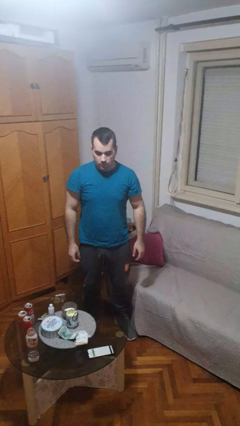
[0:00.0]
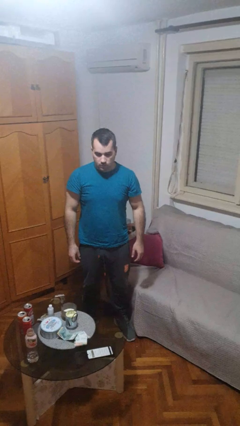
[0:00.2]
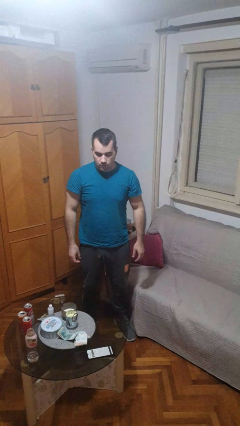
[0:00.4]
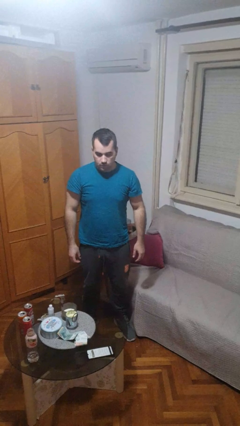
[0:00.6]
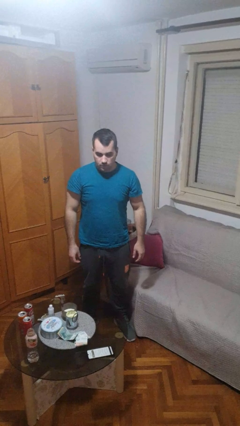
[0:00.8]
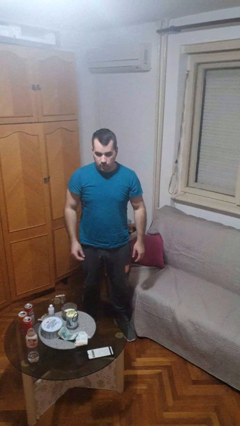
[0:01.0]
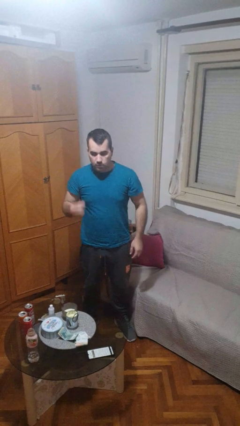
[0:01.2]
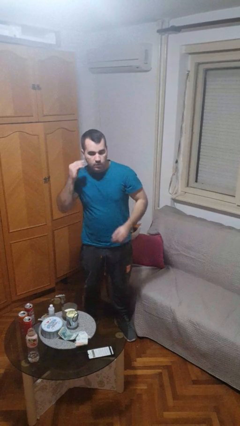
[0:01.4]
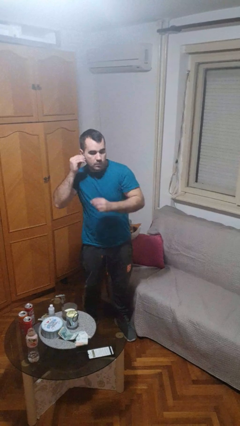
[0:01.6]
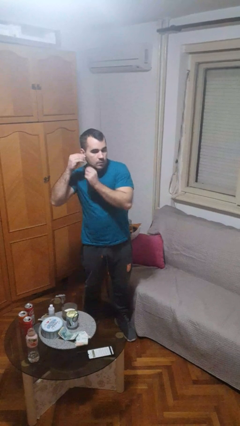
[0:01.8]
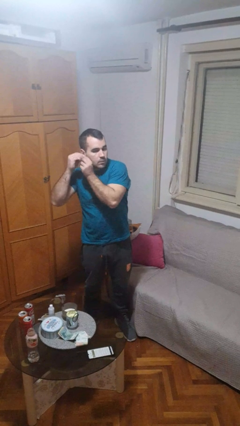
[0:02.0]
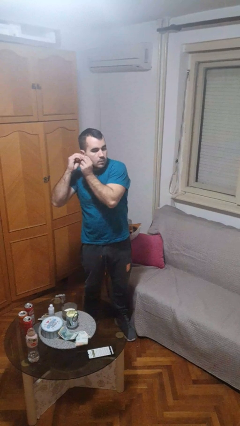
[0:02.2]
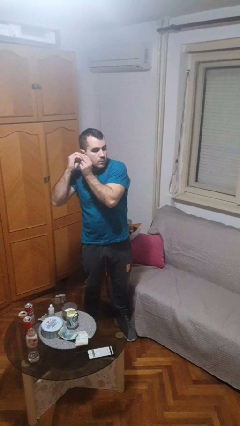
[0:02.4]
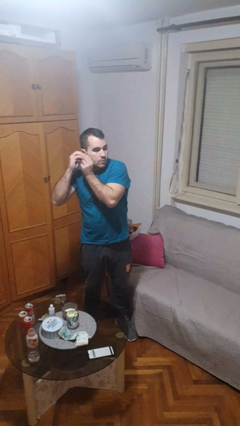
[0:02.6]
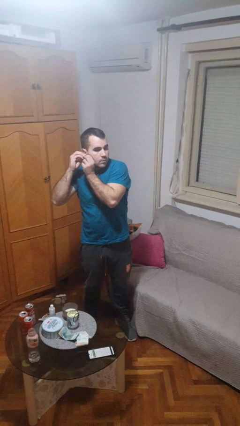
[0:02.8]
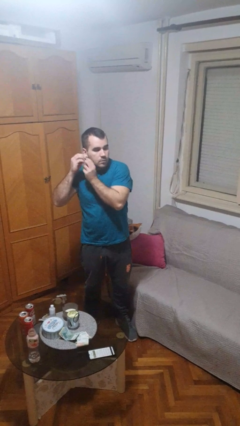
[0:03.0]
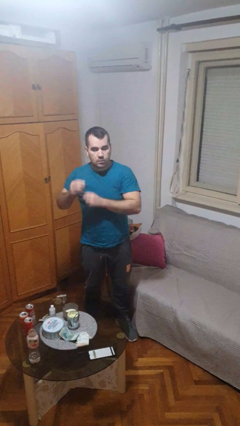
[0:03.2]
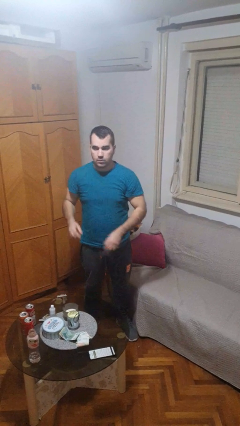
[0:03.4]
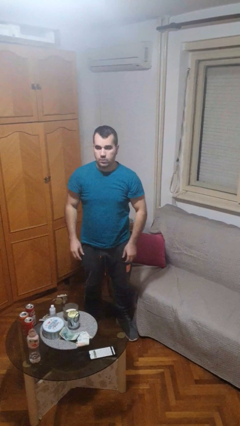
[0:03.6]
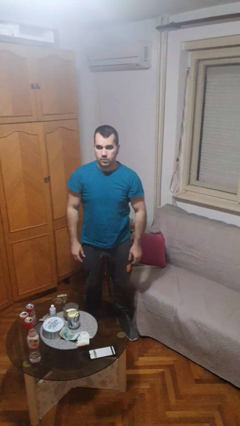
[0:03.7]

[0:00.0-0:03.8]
person puts on earrings

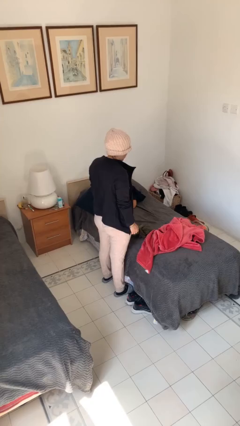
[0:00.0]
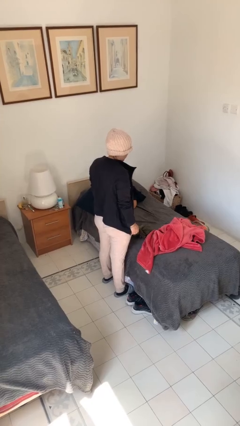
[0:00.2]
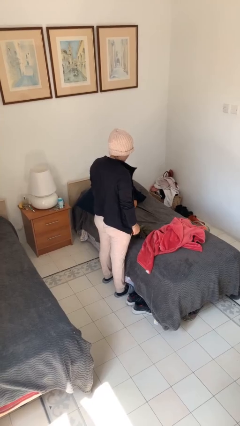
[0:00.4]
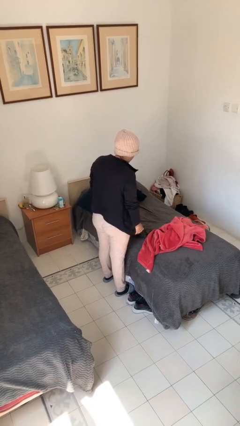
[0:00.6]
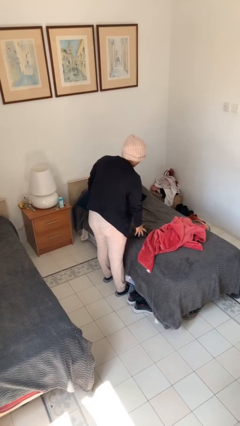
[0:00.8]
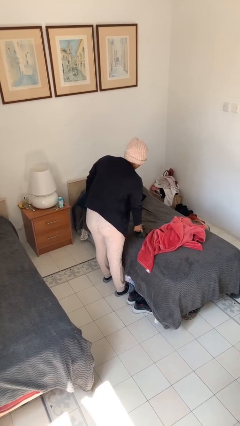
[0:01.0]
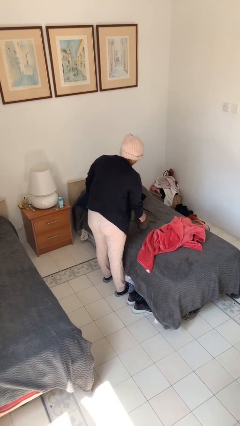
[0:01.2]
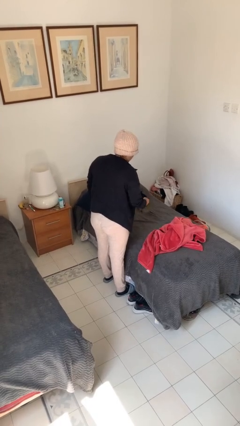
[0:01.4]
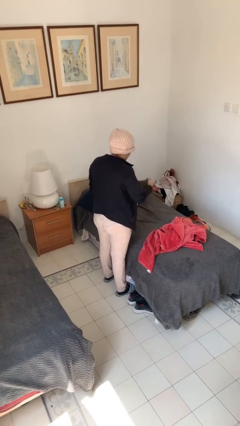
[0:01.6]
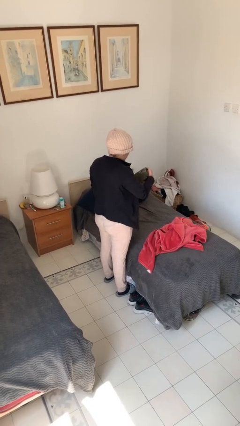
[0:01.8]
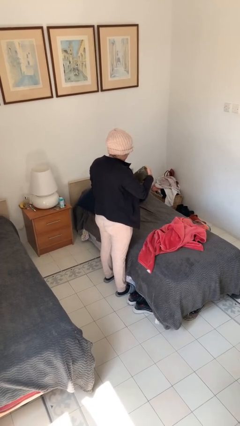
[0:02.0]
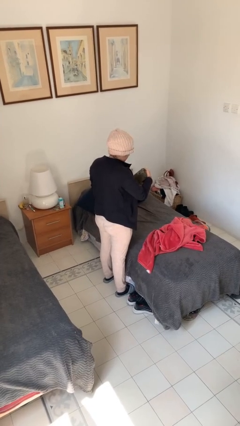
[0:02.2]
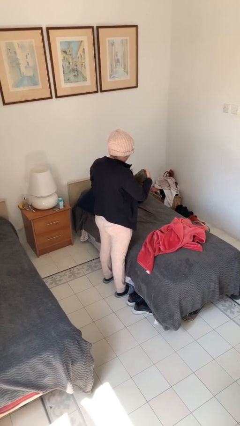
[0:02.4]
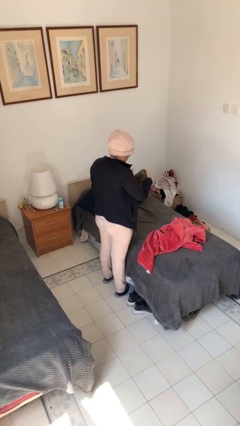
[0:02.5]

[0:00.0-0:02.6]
person picks up object from couch

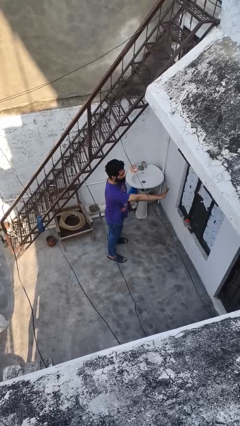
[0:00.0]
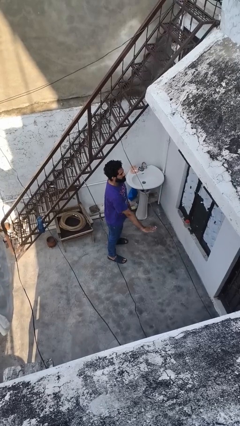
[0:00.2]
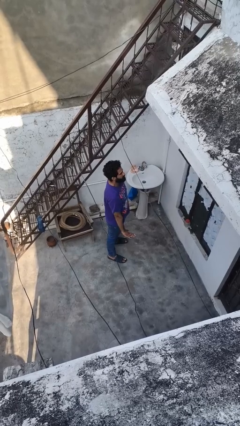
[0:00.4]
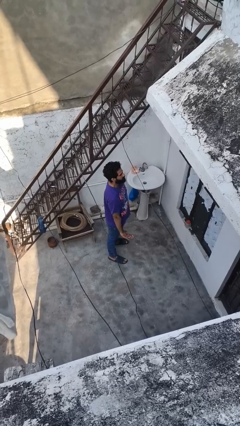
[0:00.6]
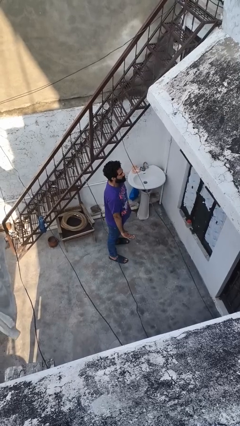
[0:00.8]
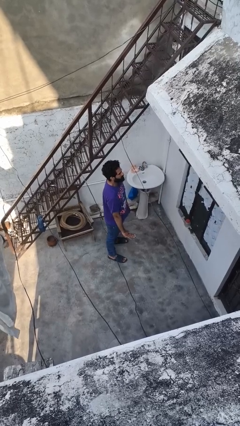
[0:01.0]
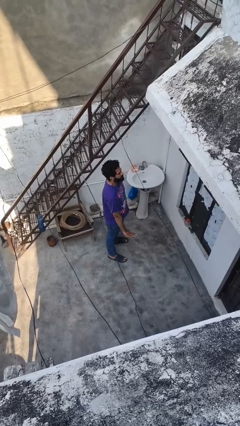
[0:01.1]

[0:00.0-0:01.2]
person gestures lower hand

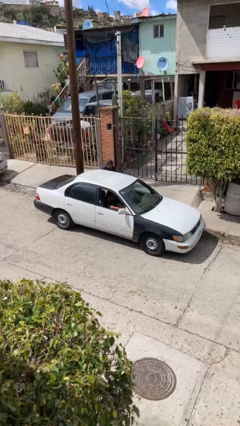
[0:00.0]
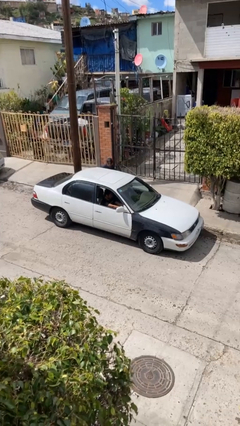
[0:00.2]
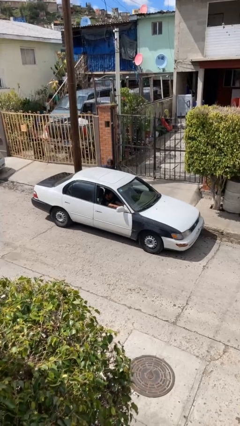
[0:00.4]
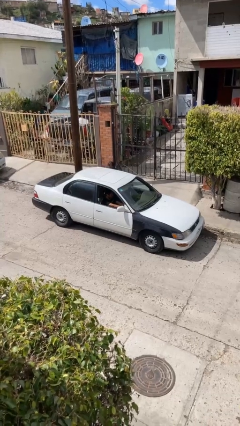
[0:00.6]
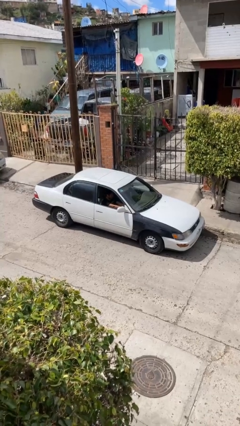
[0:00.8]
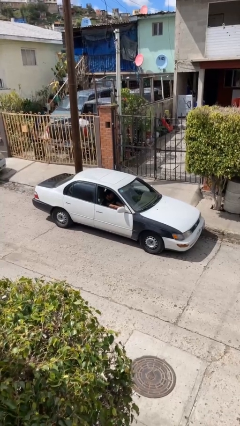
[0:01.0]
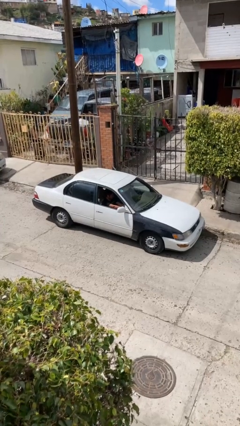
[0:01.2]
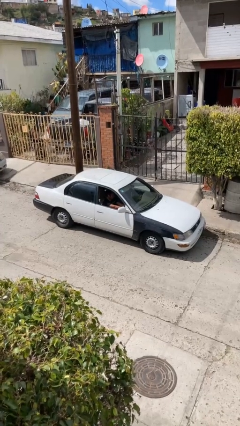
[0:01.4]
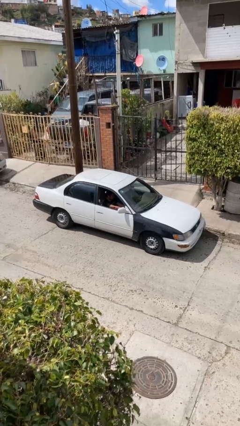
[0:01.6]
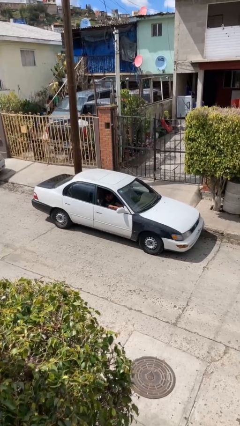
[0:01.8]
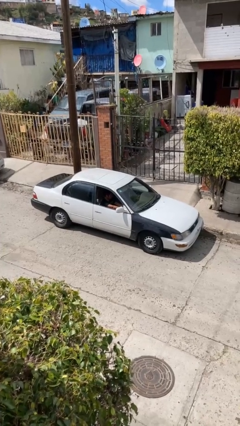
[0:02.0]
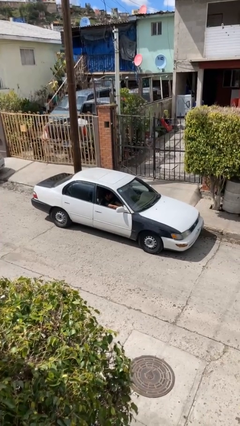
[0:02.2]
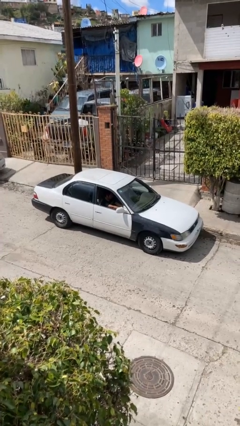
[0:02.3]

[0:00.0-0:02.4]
car picks up person

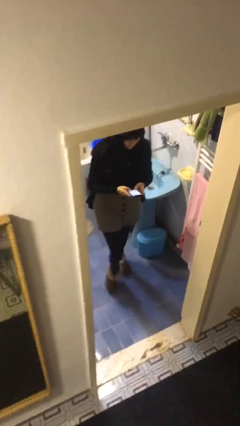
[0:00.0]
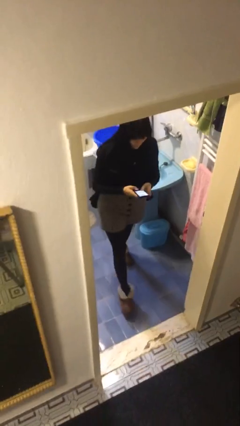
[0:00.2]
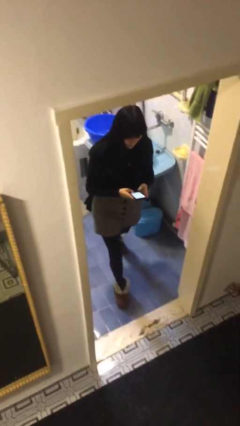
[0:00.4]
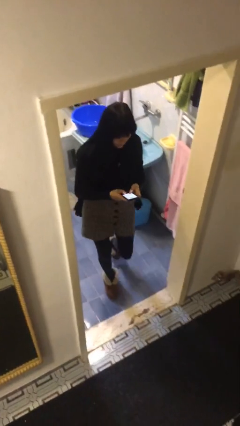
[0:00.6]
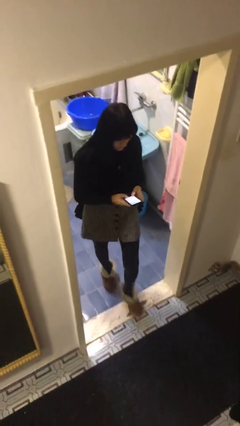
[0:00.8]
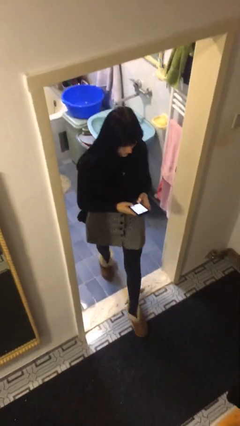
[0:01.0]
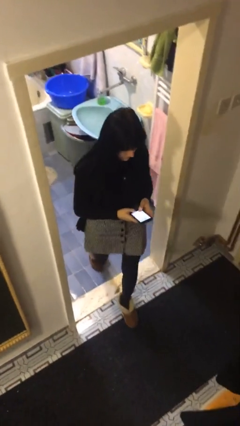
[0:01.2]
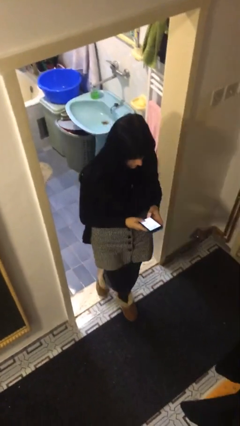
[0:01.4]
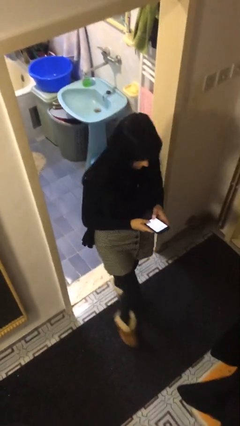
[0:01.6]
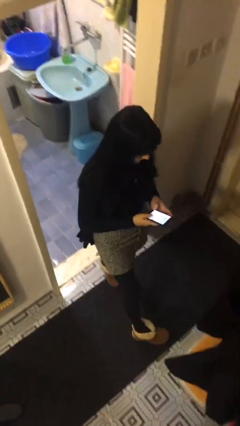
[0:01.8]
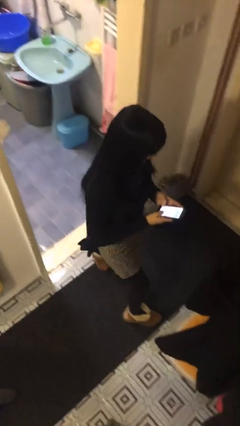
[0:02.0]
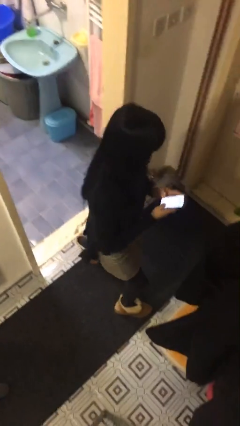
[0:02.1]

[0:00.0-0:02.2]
person enters scene through structure

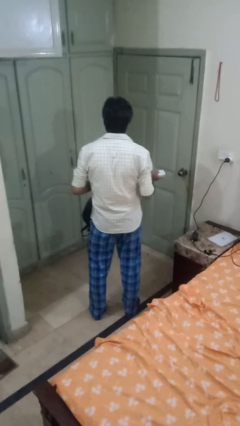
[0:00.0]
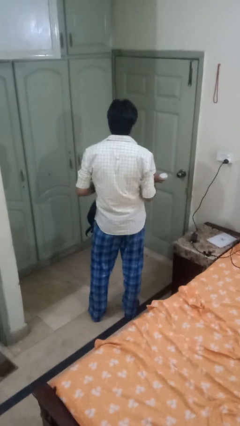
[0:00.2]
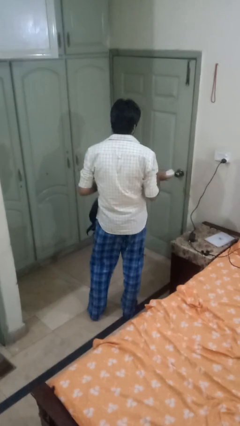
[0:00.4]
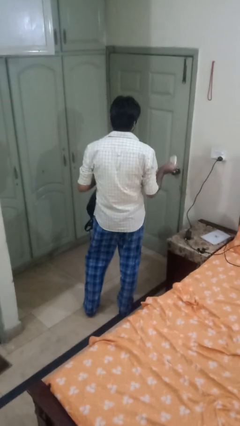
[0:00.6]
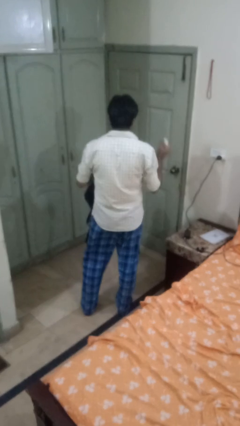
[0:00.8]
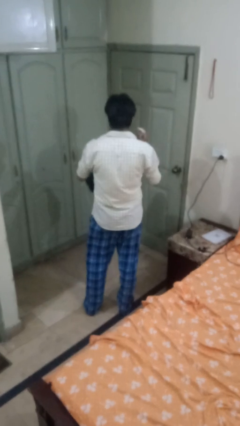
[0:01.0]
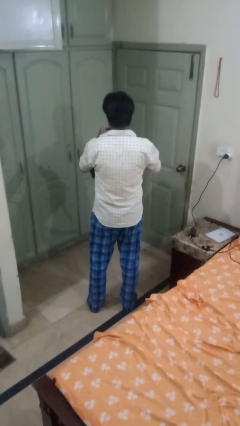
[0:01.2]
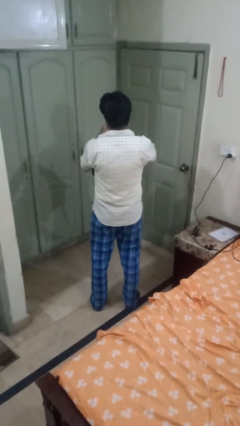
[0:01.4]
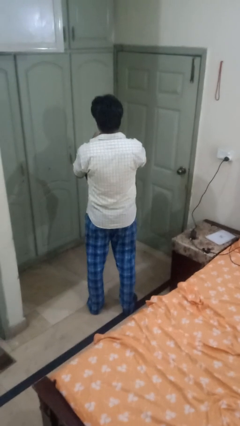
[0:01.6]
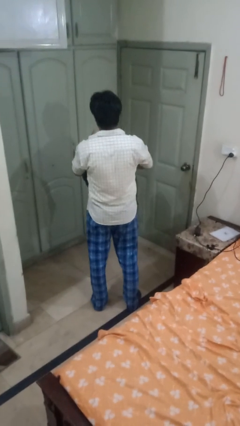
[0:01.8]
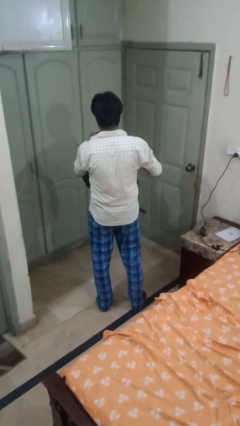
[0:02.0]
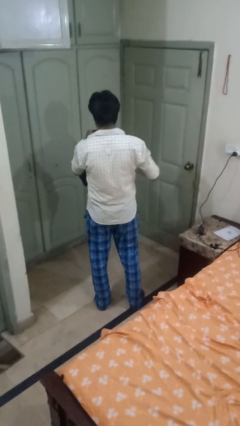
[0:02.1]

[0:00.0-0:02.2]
person puts object into backpack

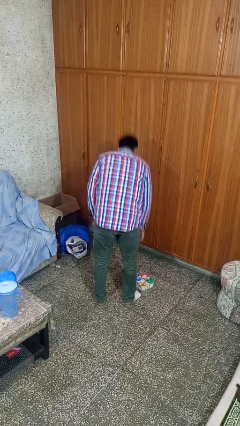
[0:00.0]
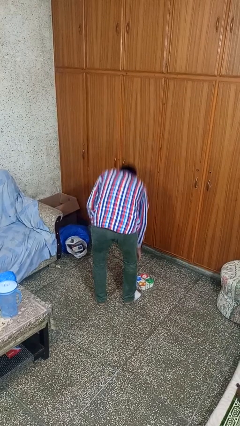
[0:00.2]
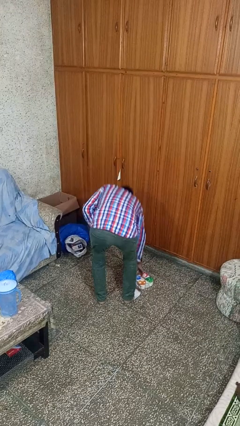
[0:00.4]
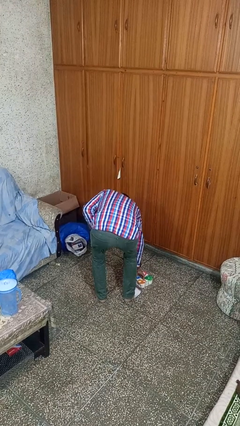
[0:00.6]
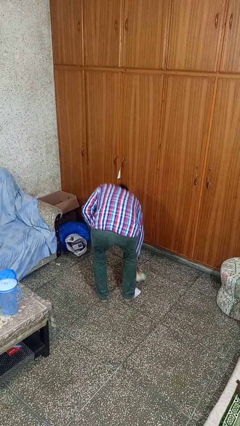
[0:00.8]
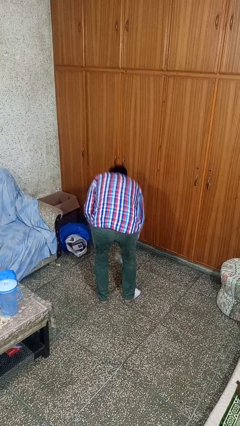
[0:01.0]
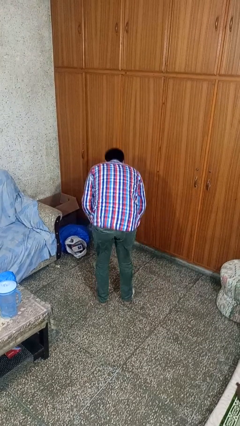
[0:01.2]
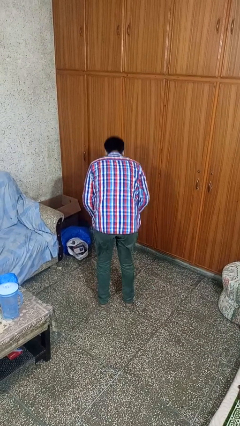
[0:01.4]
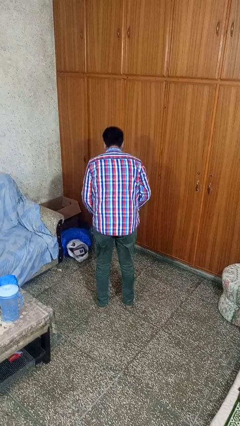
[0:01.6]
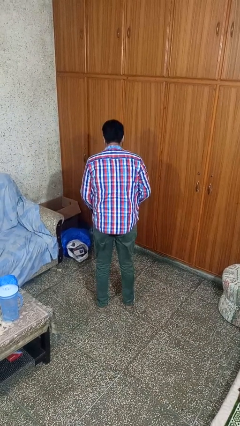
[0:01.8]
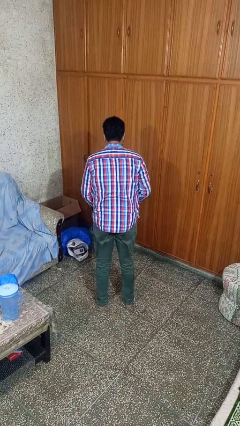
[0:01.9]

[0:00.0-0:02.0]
person picks up object from floor
